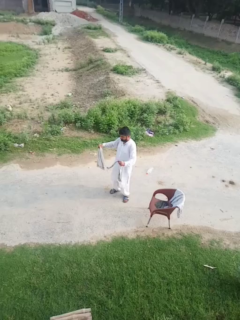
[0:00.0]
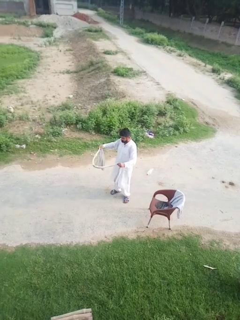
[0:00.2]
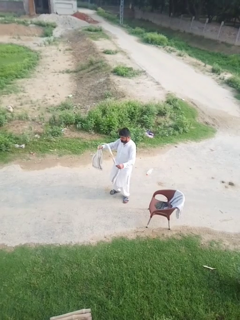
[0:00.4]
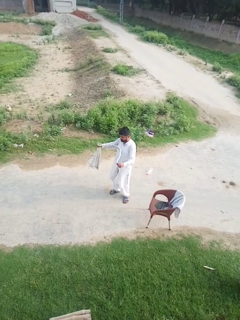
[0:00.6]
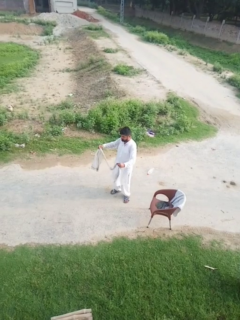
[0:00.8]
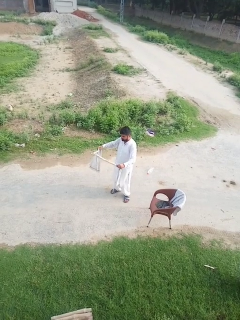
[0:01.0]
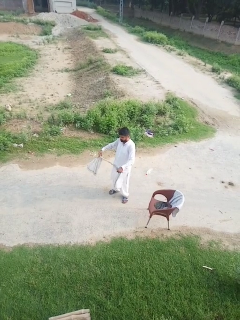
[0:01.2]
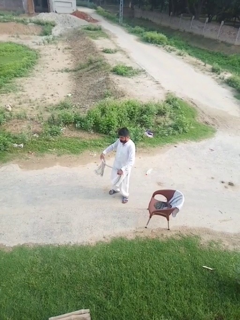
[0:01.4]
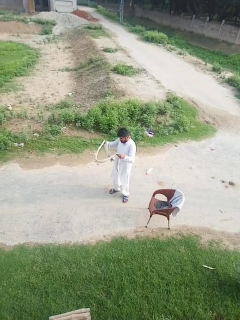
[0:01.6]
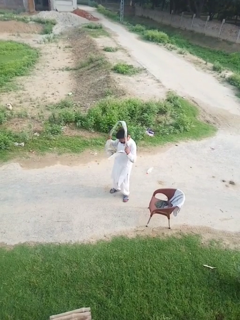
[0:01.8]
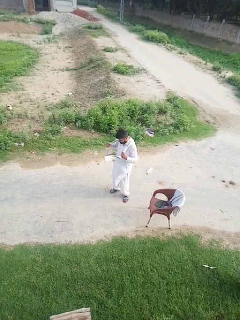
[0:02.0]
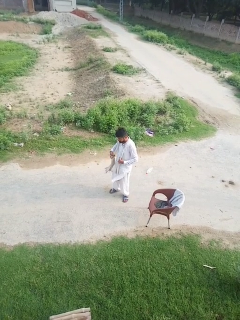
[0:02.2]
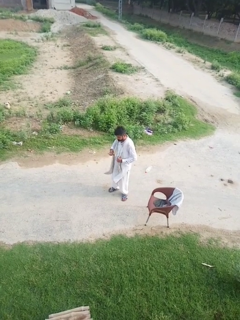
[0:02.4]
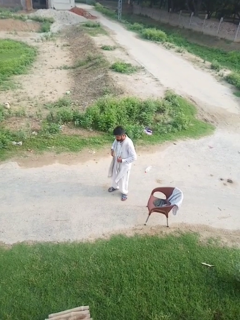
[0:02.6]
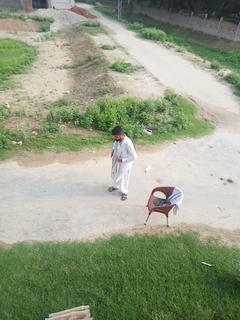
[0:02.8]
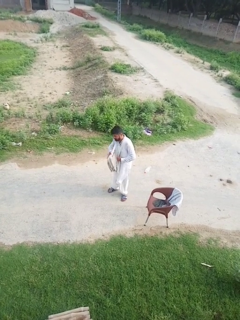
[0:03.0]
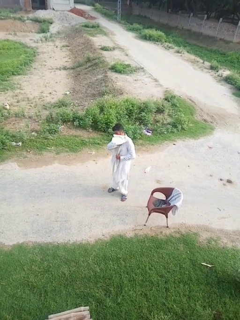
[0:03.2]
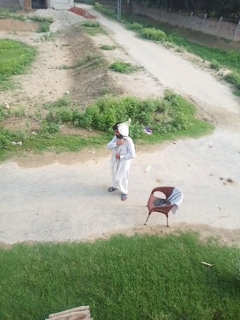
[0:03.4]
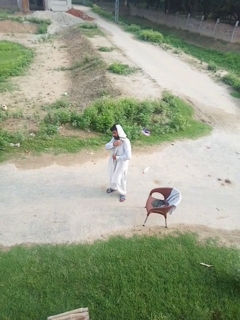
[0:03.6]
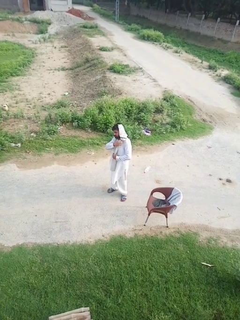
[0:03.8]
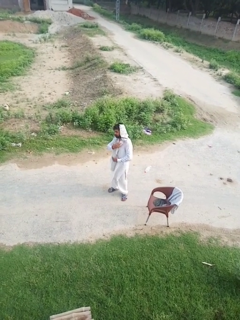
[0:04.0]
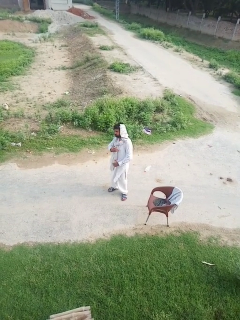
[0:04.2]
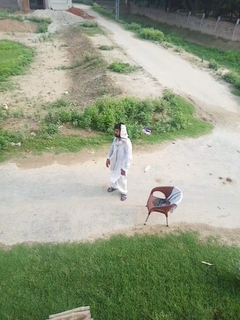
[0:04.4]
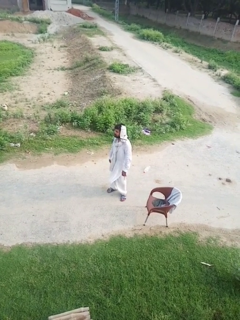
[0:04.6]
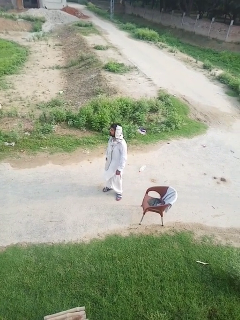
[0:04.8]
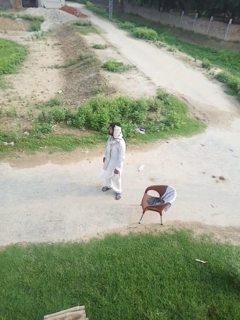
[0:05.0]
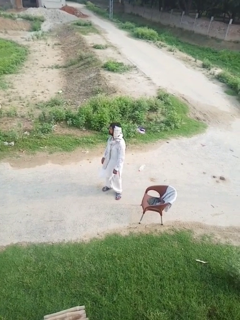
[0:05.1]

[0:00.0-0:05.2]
person puts on scarf

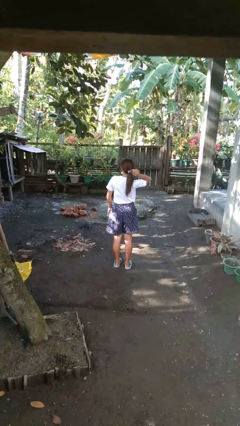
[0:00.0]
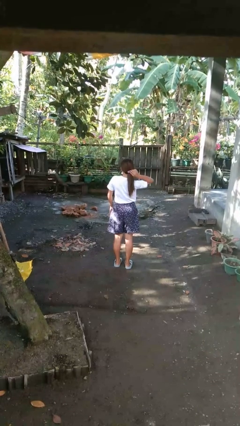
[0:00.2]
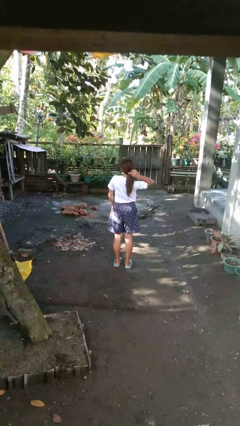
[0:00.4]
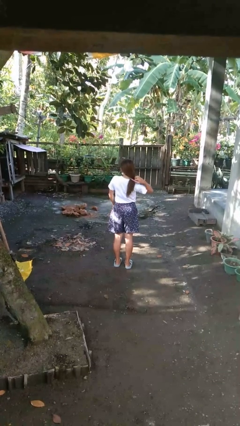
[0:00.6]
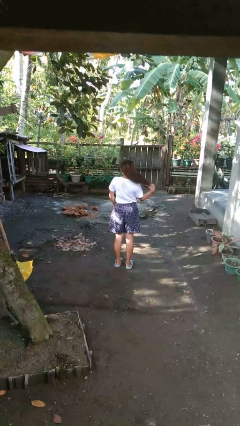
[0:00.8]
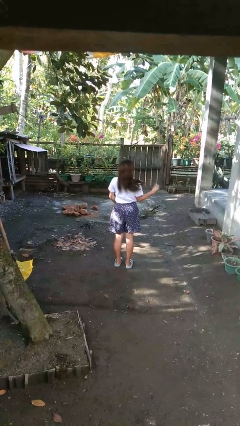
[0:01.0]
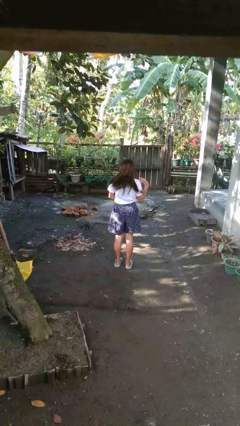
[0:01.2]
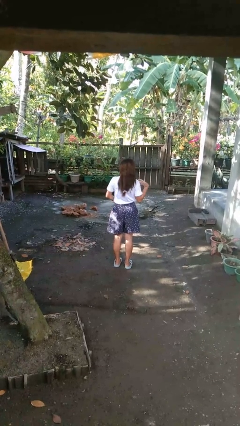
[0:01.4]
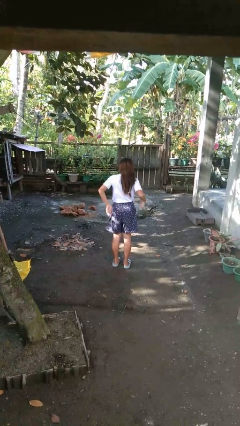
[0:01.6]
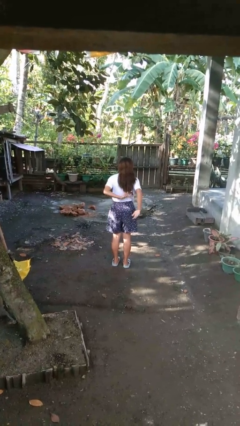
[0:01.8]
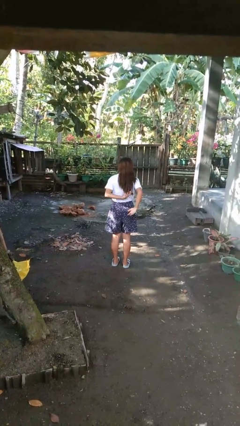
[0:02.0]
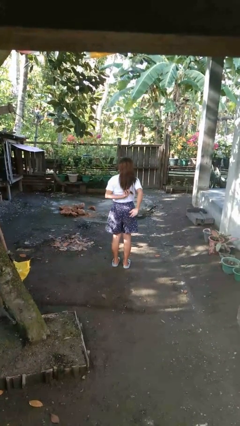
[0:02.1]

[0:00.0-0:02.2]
person takes off hairtie

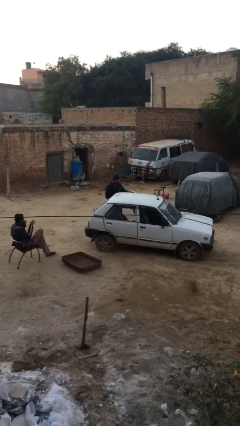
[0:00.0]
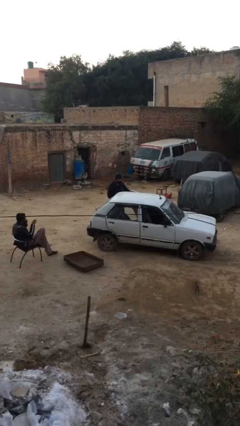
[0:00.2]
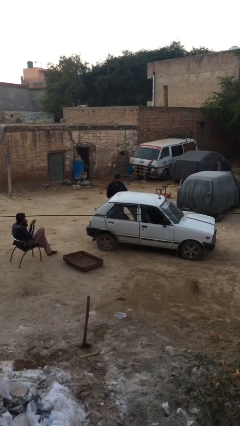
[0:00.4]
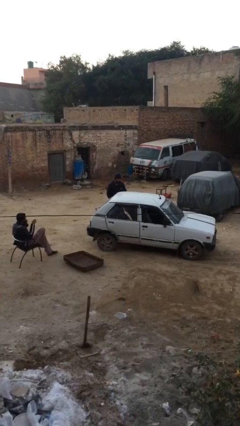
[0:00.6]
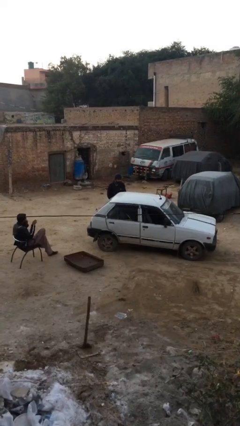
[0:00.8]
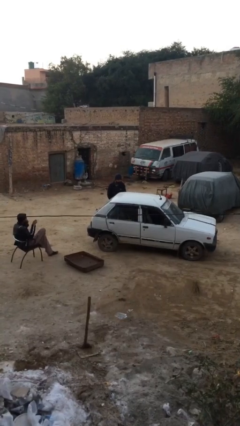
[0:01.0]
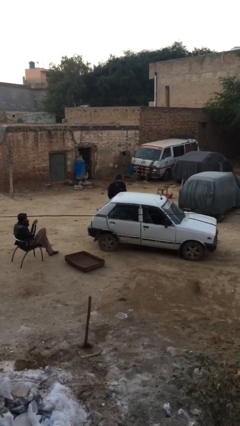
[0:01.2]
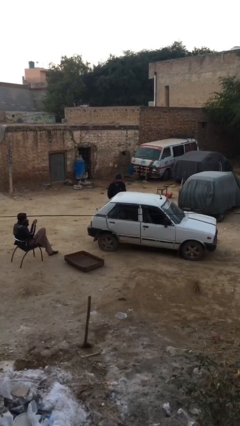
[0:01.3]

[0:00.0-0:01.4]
person closes car door

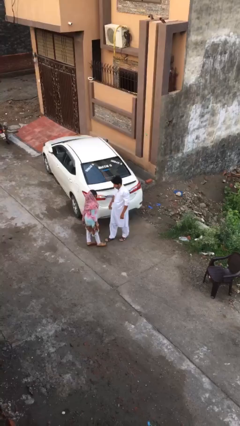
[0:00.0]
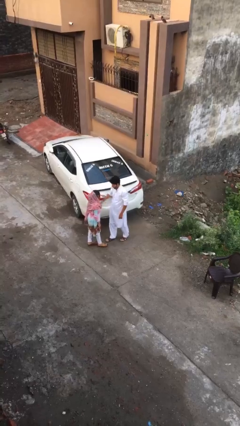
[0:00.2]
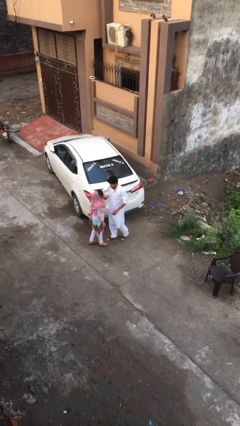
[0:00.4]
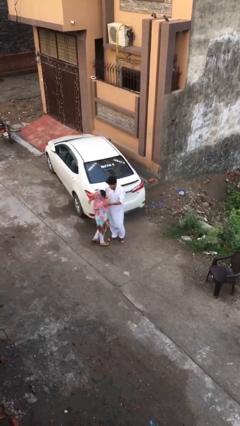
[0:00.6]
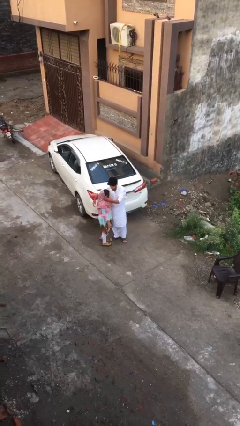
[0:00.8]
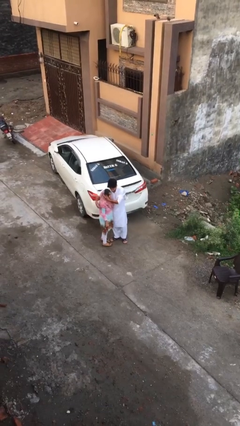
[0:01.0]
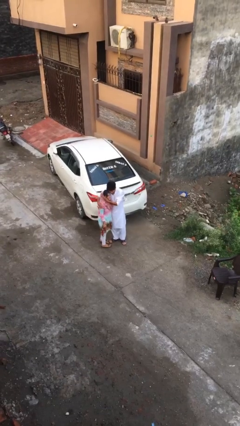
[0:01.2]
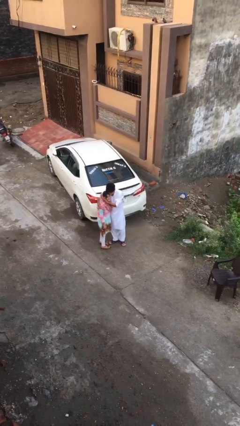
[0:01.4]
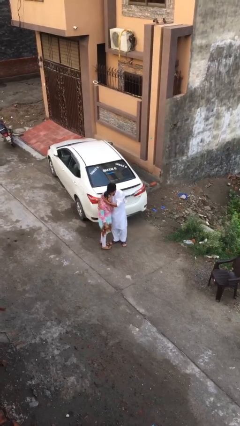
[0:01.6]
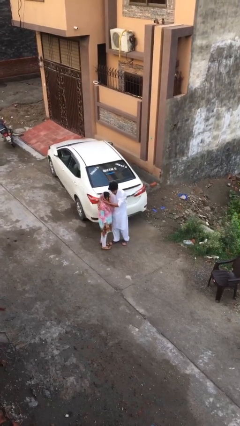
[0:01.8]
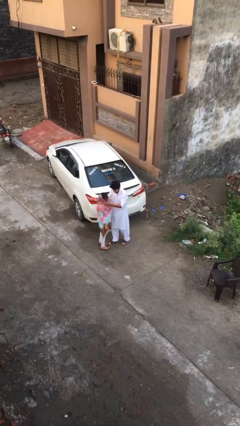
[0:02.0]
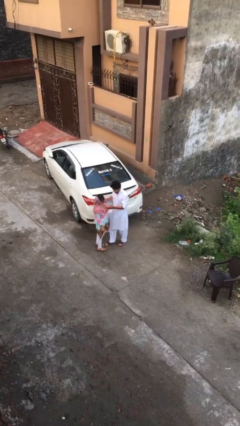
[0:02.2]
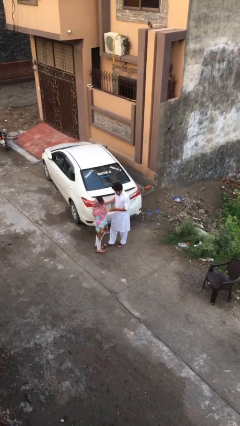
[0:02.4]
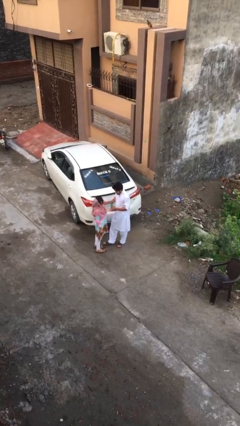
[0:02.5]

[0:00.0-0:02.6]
person embraces person

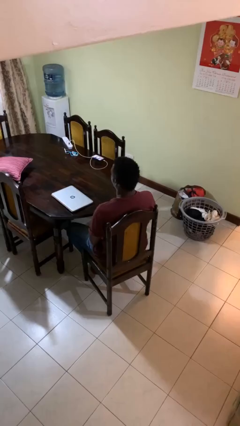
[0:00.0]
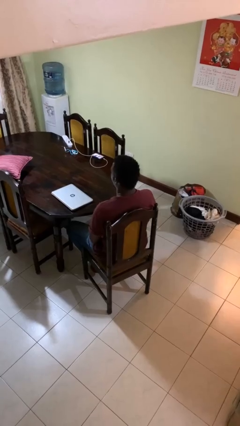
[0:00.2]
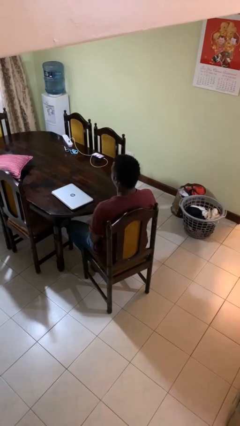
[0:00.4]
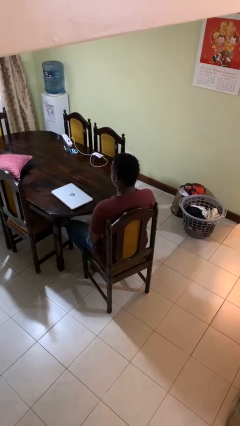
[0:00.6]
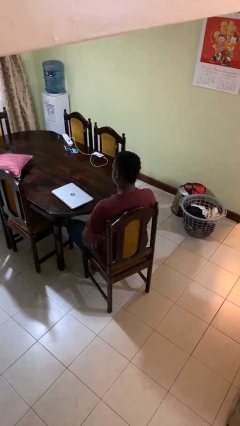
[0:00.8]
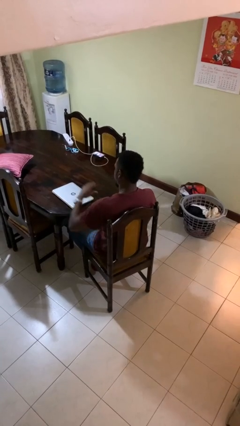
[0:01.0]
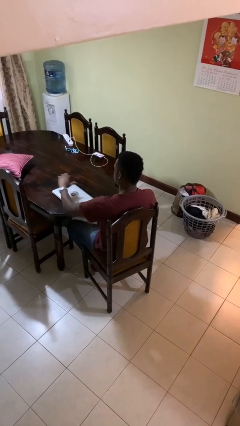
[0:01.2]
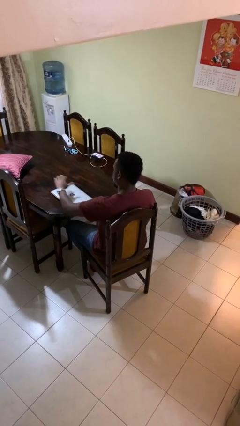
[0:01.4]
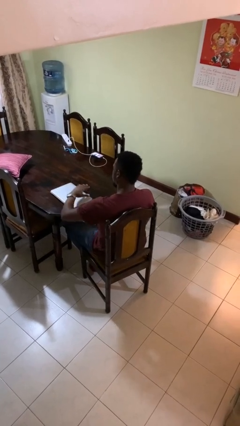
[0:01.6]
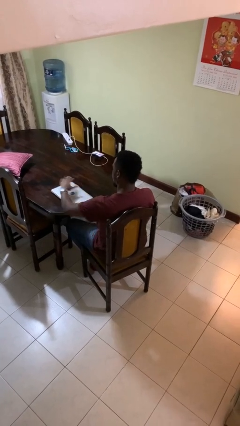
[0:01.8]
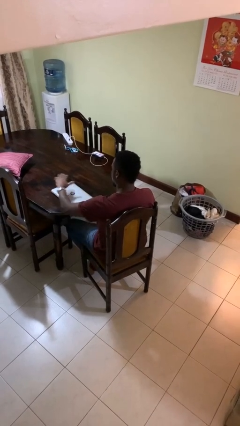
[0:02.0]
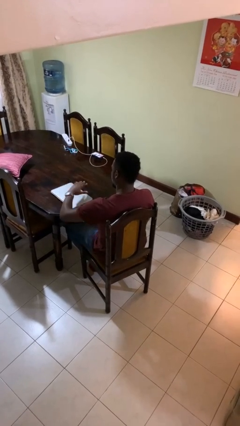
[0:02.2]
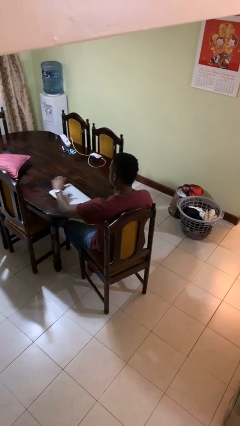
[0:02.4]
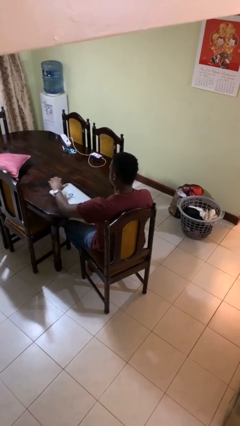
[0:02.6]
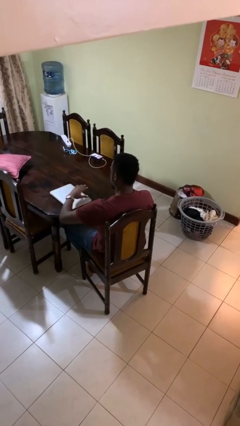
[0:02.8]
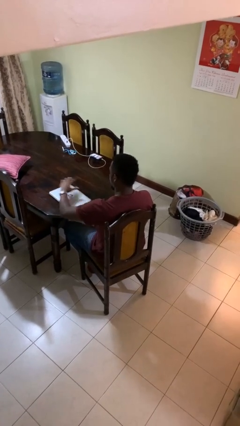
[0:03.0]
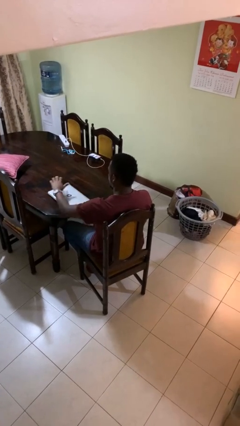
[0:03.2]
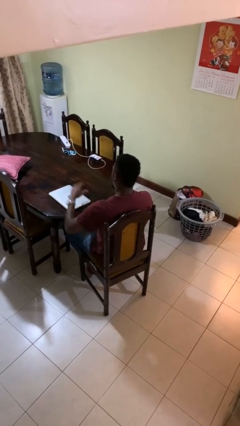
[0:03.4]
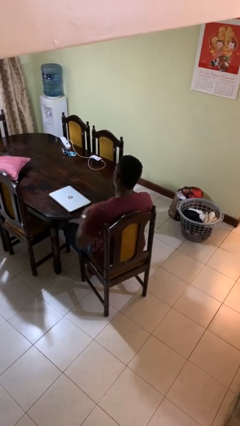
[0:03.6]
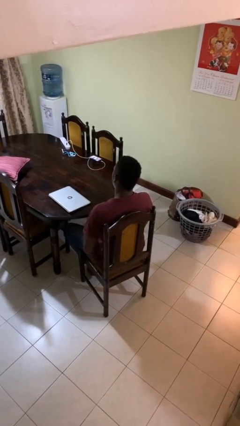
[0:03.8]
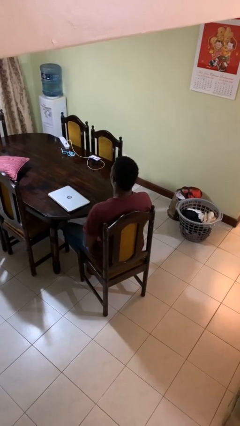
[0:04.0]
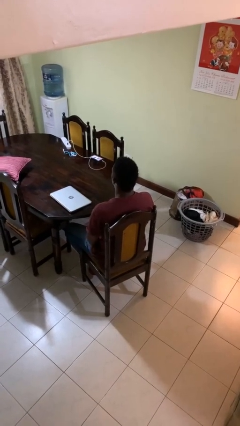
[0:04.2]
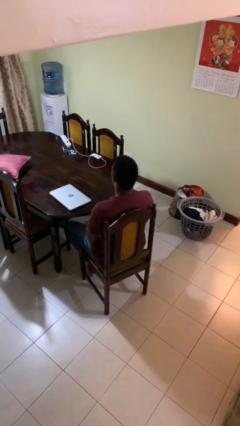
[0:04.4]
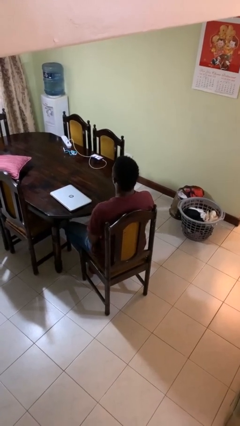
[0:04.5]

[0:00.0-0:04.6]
person waves hand over object

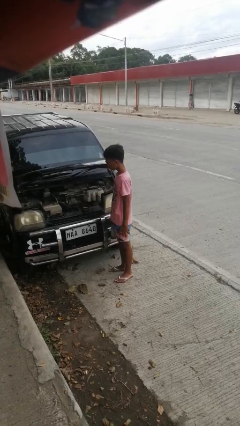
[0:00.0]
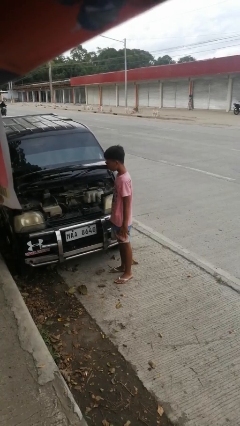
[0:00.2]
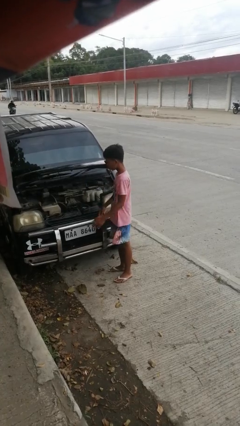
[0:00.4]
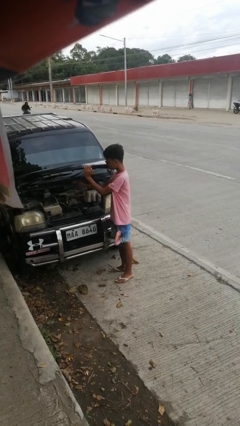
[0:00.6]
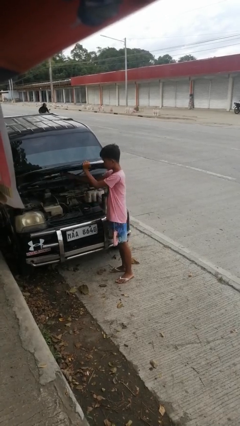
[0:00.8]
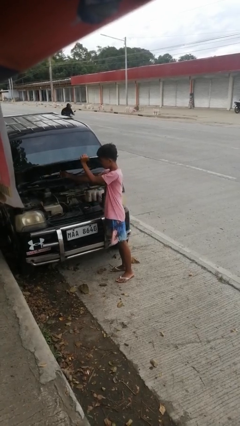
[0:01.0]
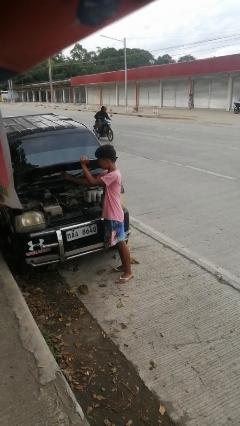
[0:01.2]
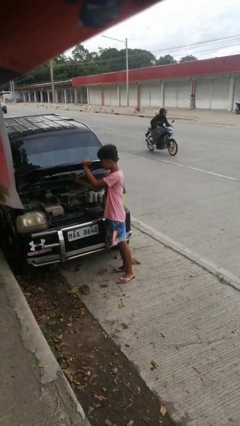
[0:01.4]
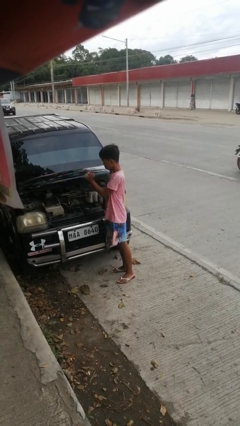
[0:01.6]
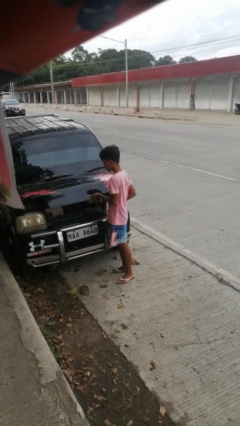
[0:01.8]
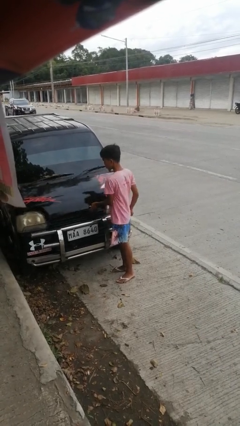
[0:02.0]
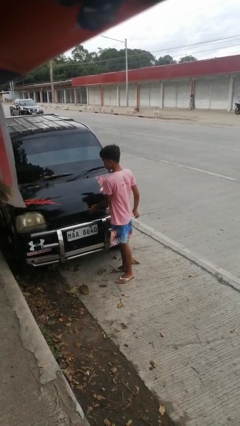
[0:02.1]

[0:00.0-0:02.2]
person closes car hood
